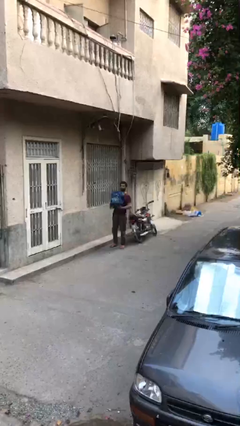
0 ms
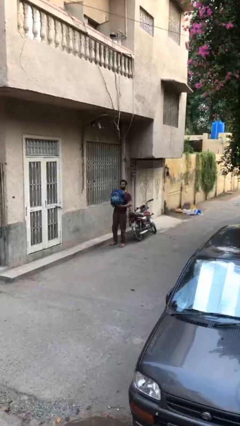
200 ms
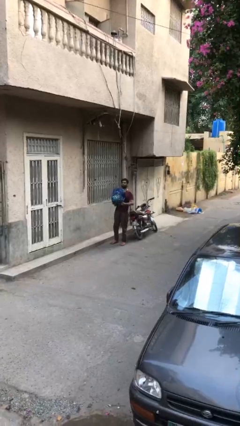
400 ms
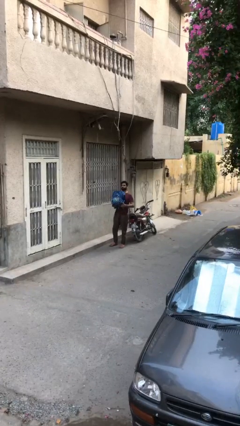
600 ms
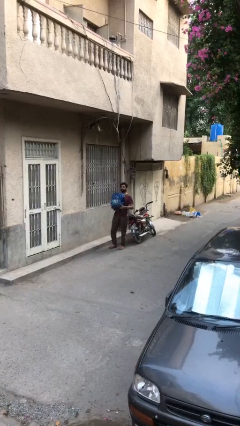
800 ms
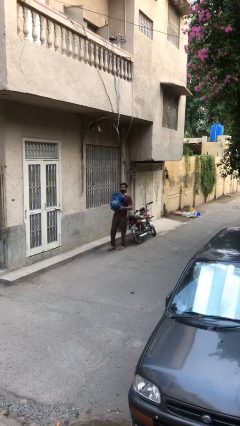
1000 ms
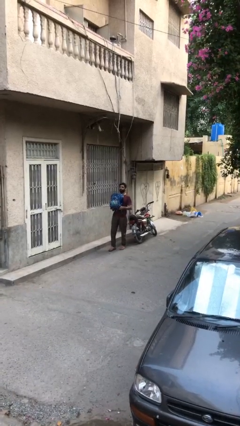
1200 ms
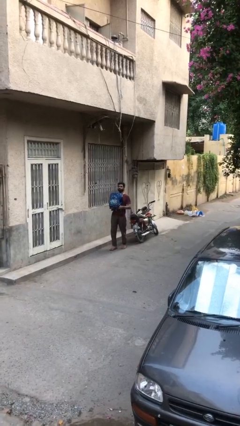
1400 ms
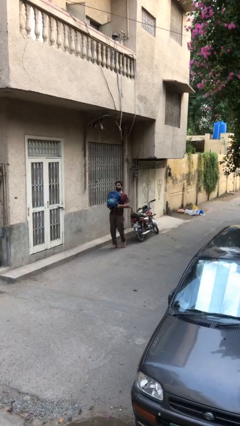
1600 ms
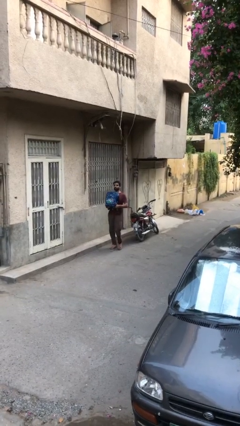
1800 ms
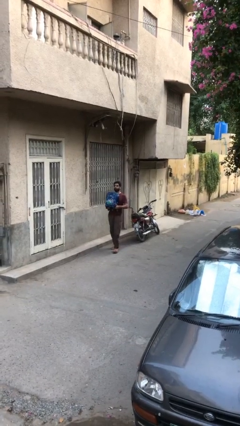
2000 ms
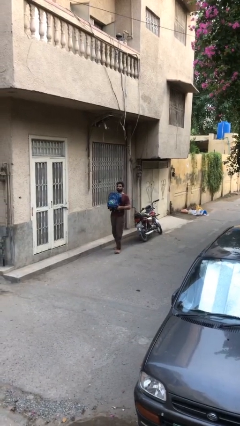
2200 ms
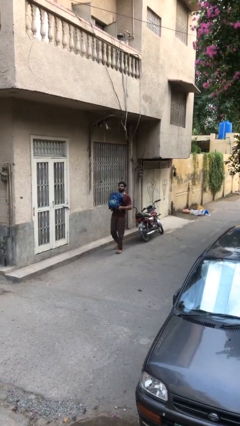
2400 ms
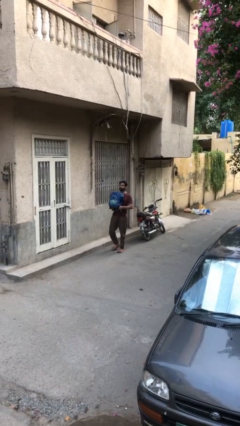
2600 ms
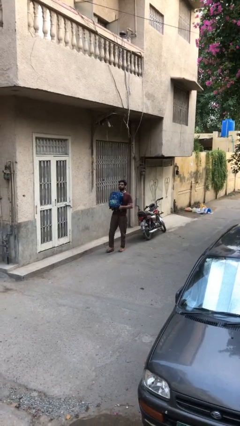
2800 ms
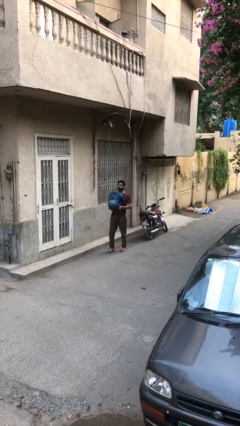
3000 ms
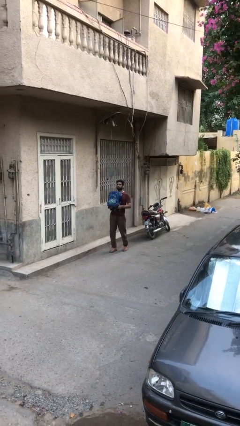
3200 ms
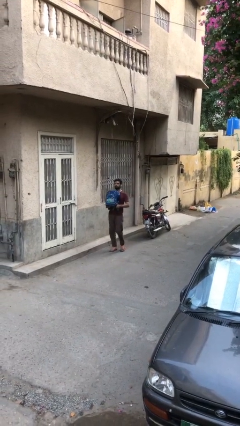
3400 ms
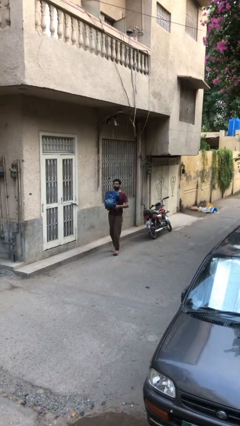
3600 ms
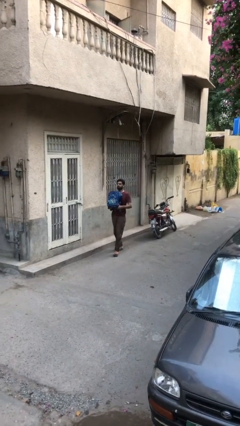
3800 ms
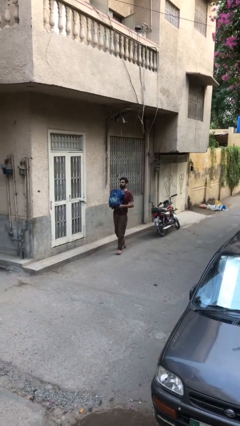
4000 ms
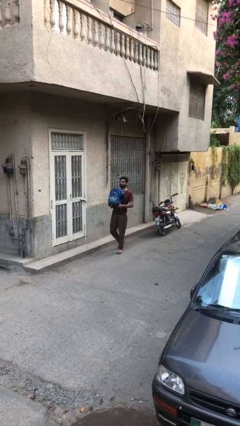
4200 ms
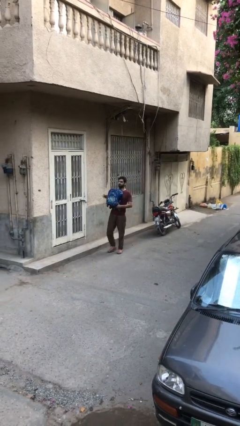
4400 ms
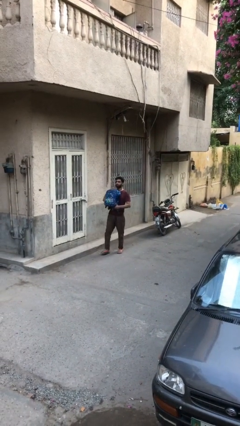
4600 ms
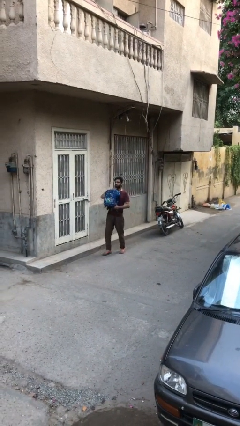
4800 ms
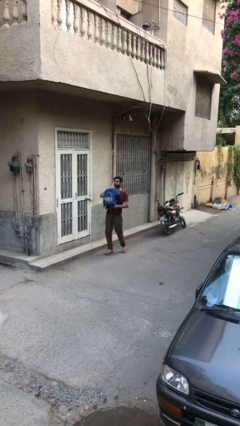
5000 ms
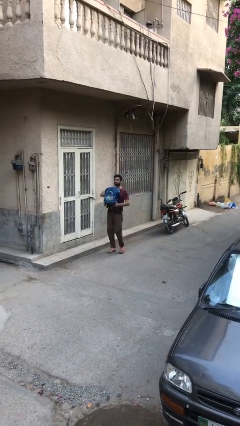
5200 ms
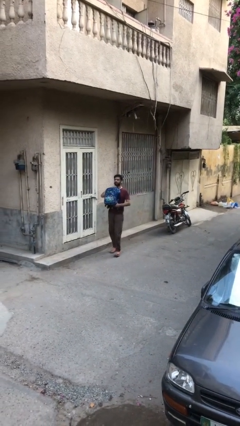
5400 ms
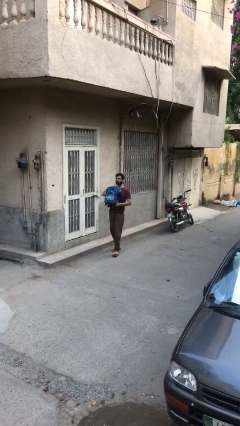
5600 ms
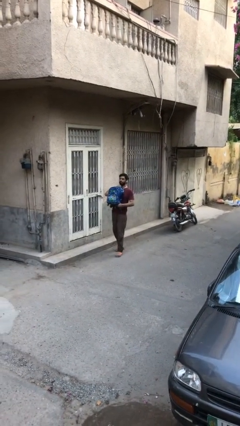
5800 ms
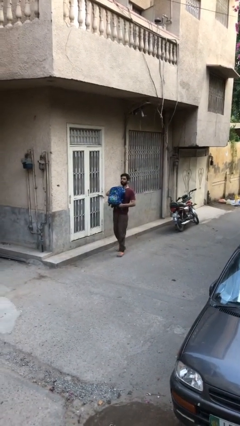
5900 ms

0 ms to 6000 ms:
person carries heavy object

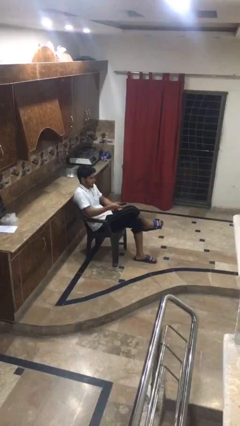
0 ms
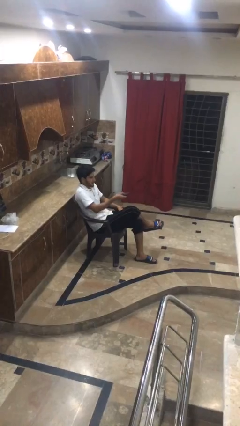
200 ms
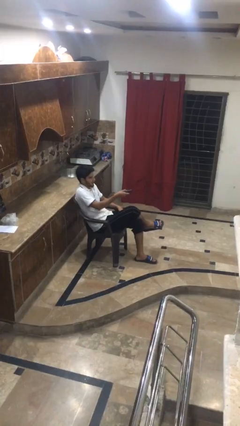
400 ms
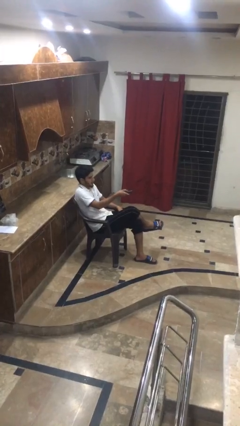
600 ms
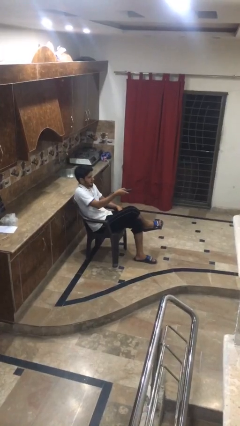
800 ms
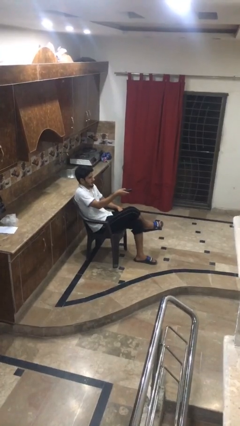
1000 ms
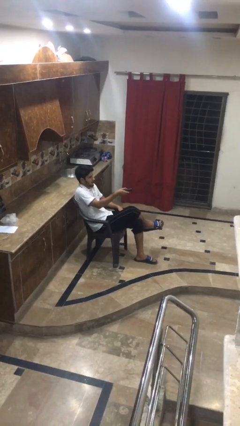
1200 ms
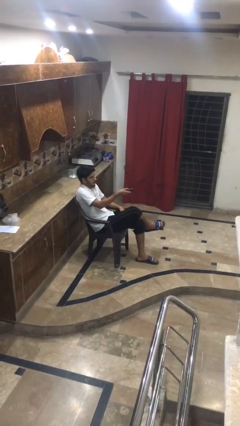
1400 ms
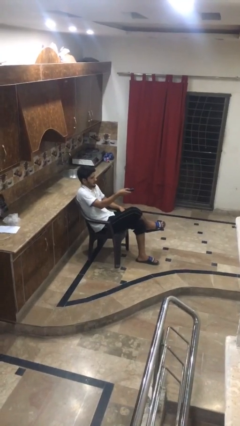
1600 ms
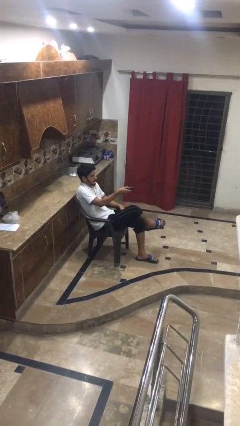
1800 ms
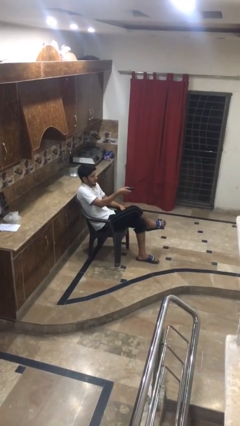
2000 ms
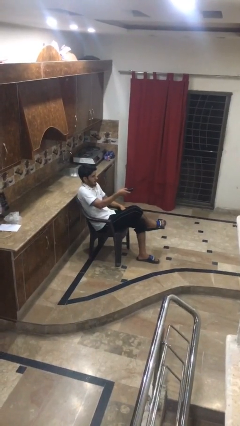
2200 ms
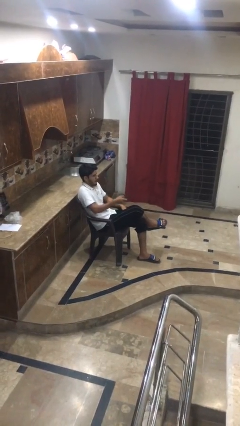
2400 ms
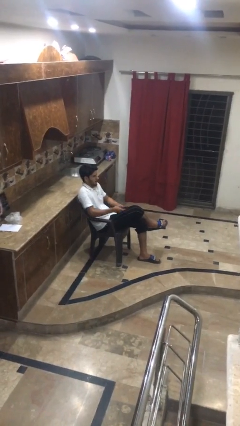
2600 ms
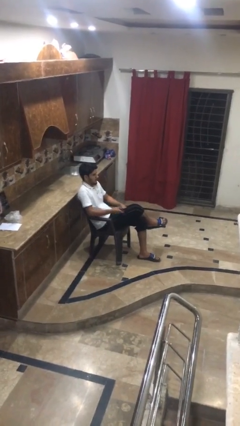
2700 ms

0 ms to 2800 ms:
person uses television remote

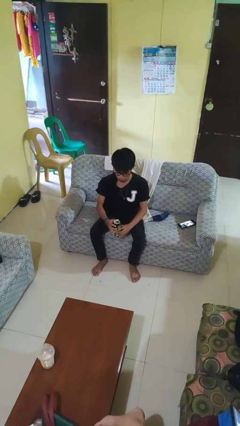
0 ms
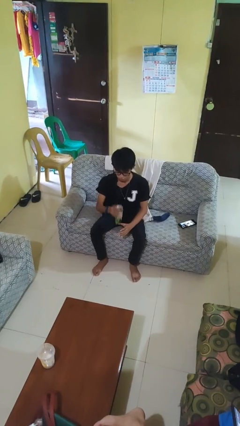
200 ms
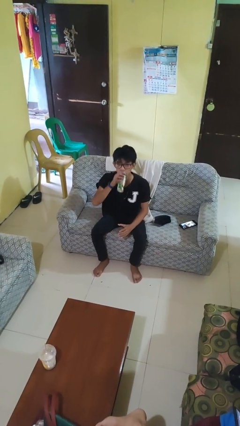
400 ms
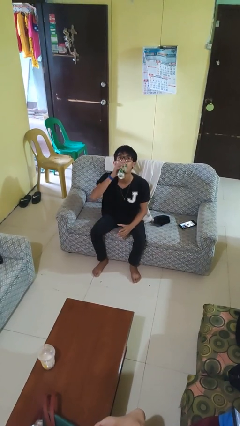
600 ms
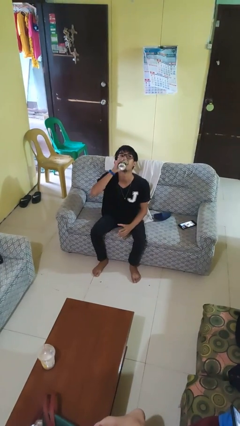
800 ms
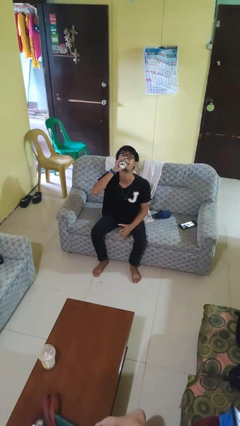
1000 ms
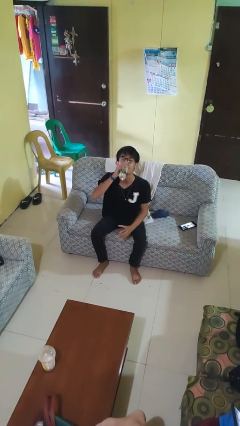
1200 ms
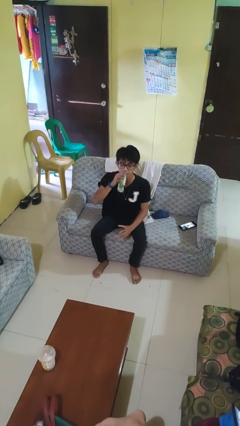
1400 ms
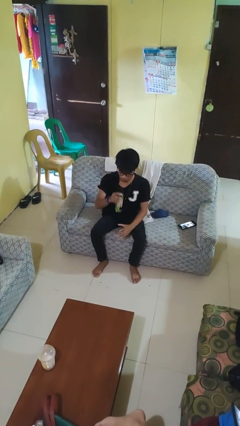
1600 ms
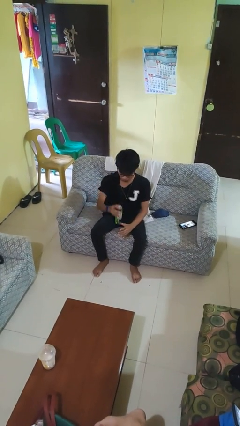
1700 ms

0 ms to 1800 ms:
person drinks from beverage can

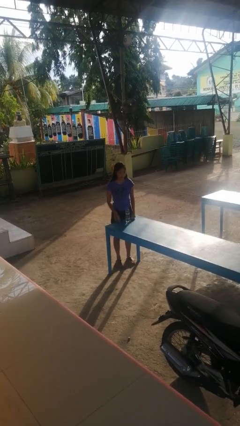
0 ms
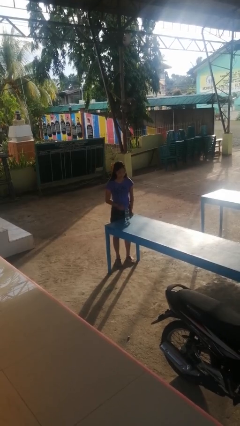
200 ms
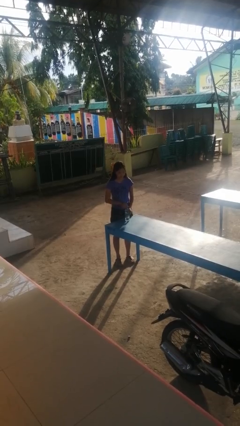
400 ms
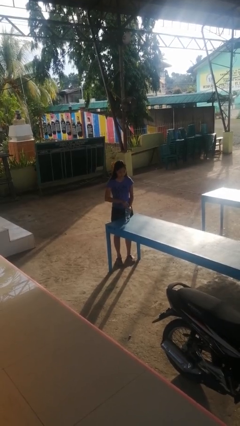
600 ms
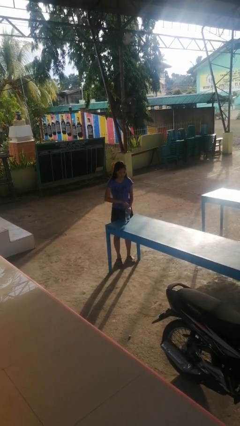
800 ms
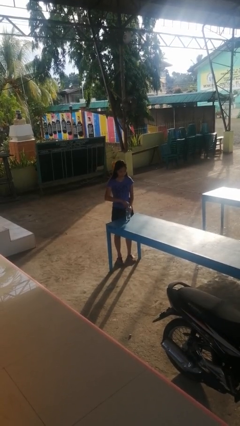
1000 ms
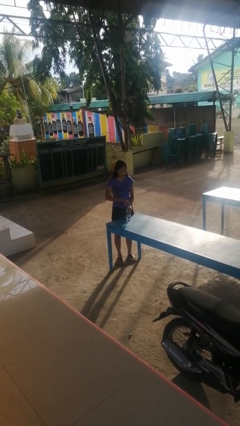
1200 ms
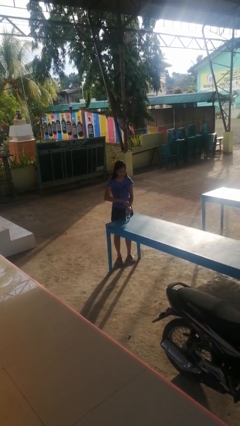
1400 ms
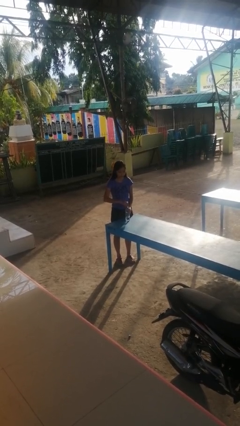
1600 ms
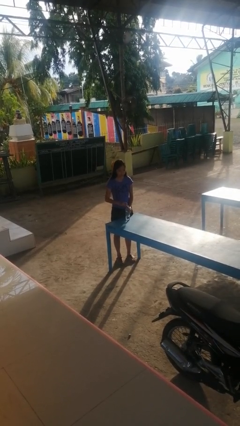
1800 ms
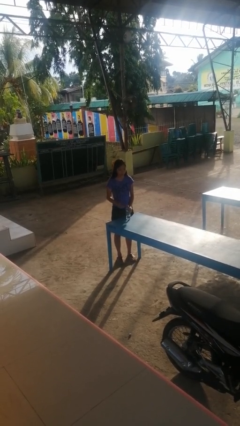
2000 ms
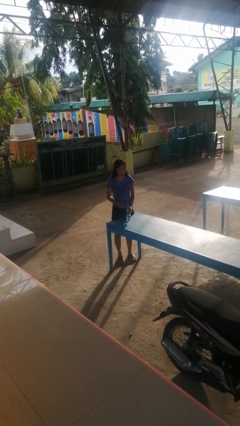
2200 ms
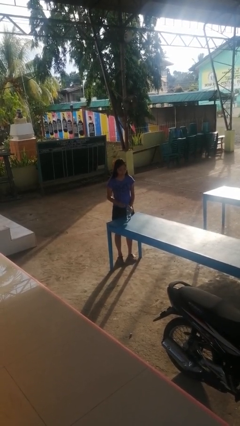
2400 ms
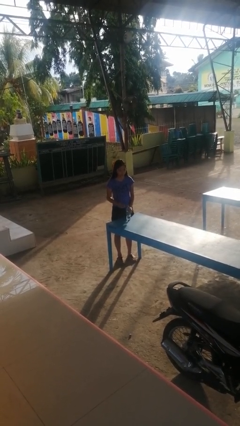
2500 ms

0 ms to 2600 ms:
person unscrews lid from bottle

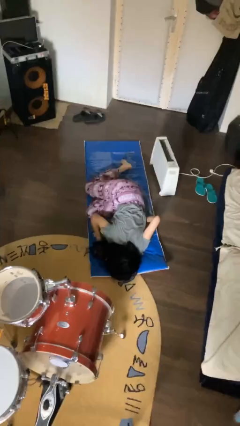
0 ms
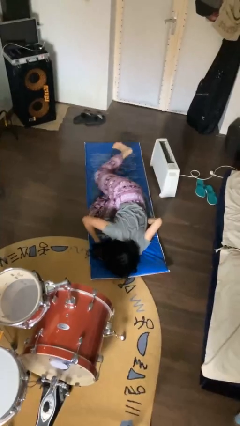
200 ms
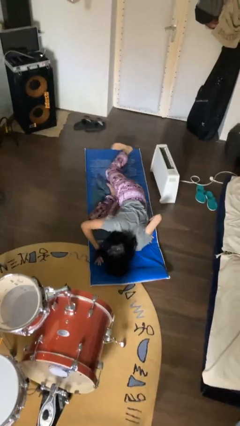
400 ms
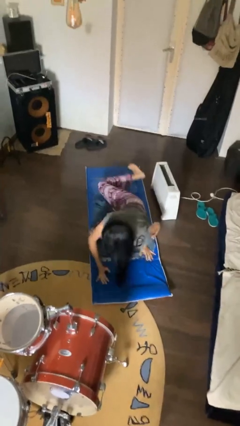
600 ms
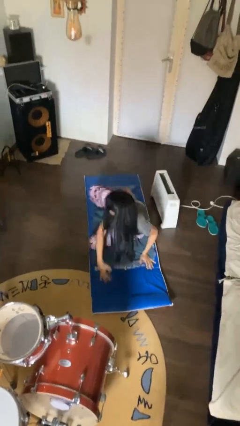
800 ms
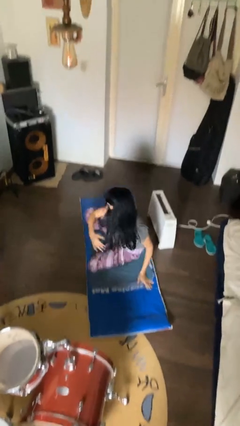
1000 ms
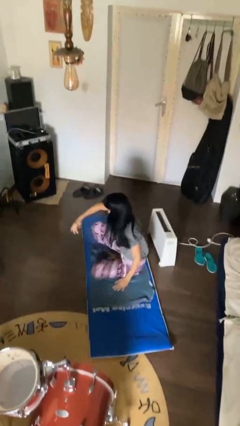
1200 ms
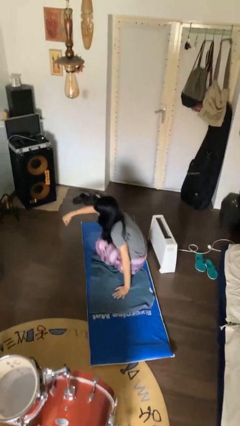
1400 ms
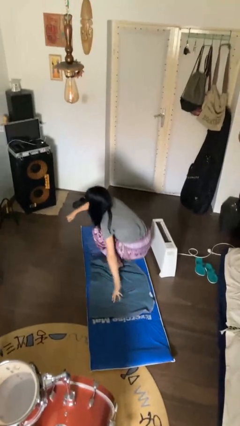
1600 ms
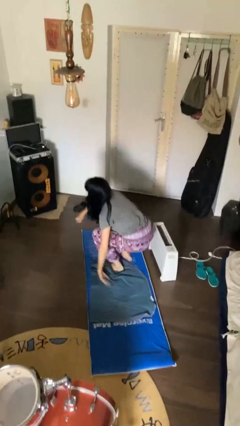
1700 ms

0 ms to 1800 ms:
person stands up from floor

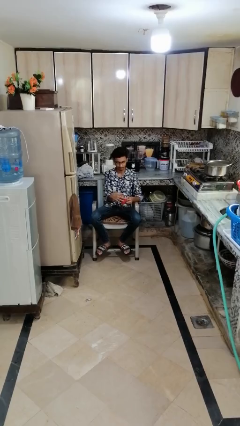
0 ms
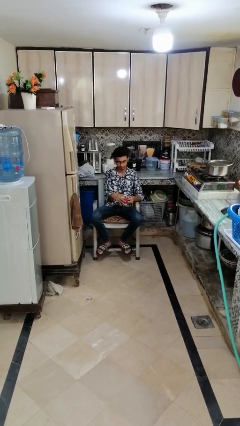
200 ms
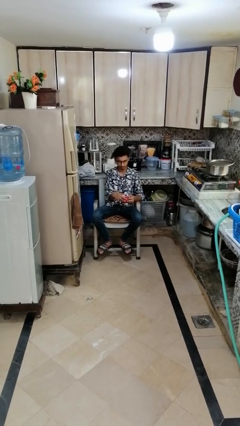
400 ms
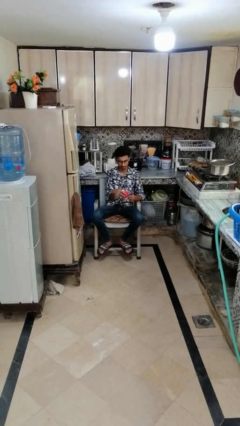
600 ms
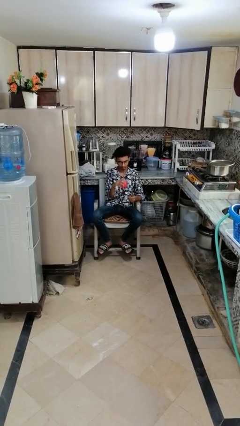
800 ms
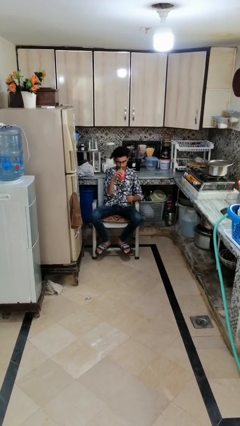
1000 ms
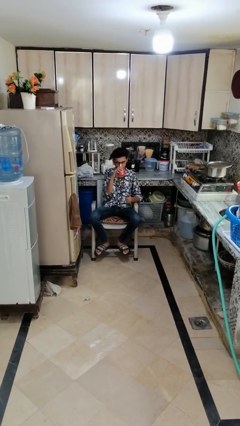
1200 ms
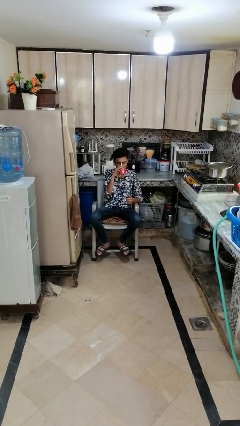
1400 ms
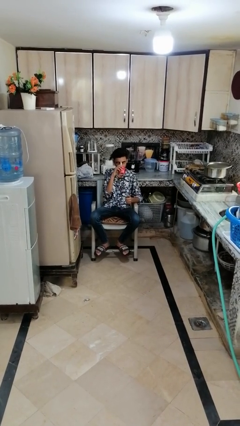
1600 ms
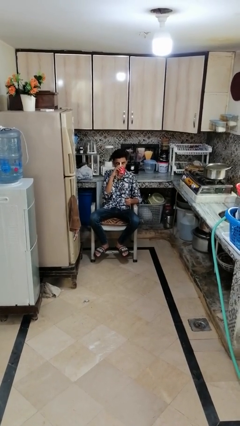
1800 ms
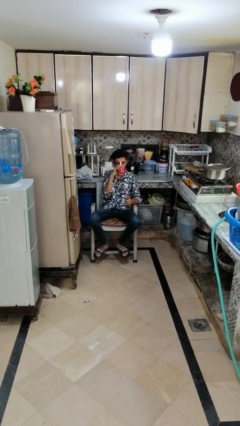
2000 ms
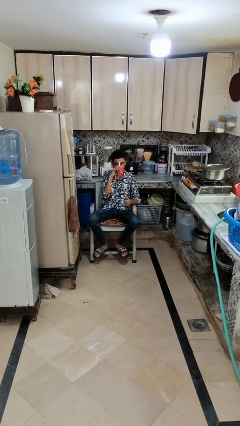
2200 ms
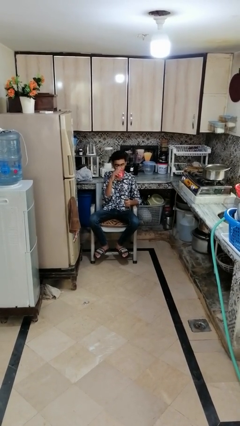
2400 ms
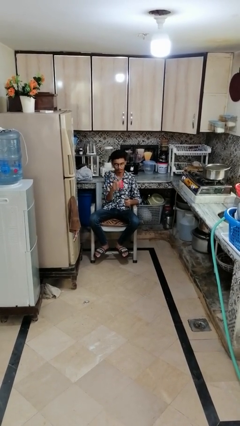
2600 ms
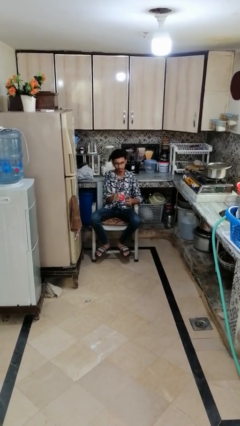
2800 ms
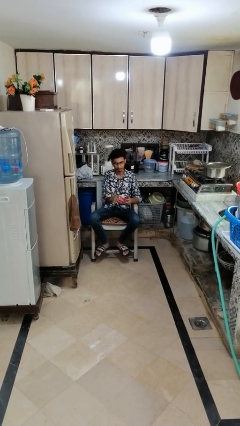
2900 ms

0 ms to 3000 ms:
person drinks from mug
